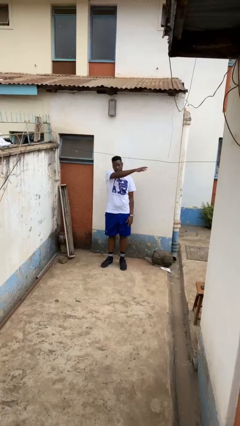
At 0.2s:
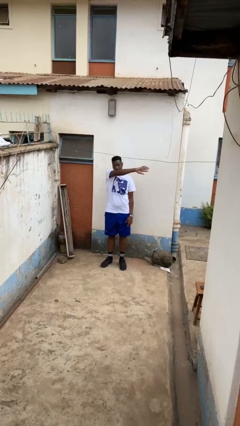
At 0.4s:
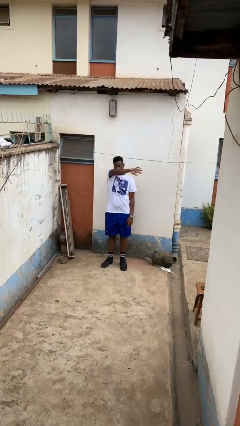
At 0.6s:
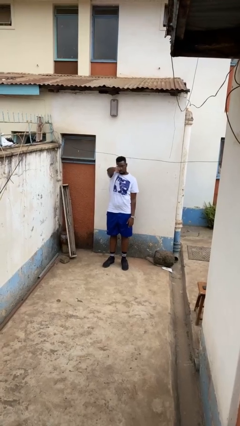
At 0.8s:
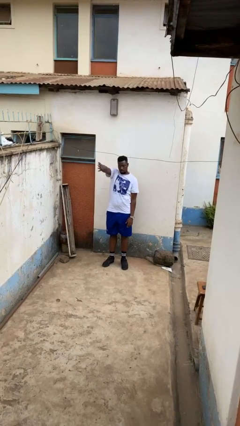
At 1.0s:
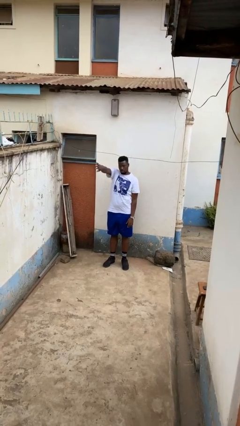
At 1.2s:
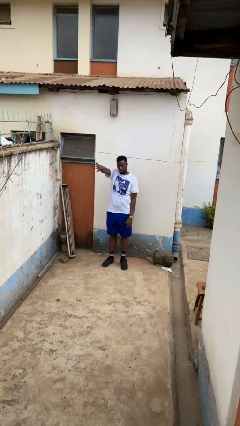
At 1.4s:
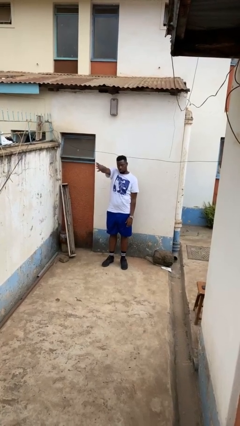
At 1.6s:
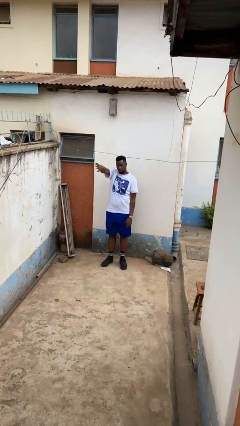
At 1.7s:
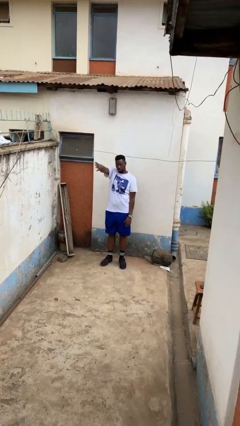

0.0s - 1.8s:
person gestures swipe right

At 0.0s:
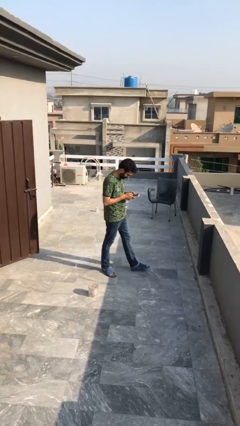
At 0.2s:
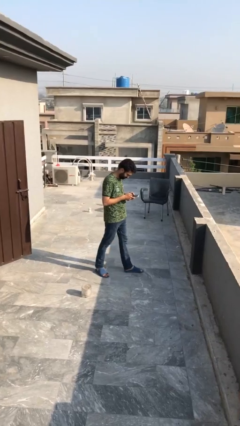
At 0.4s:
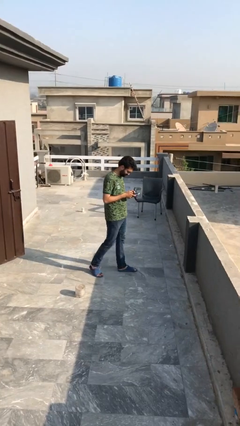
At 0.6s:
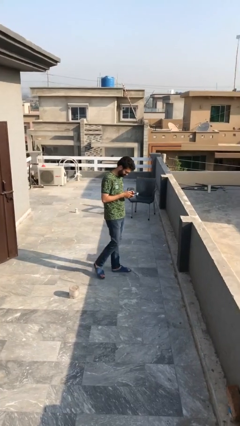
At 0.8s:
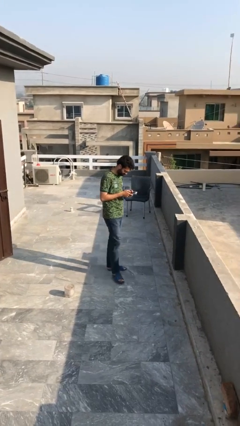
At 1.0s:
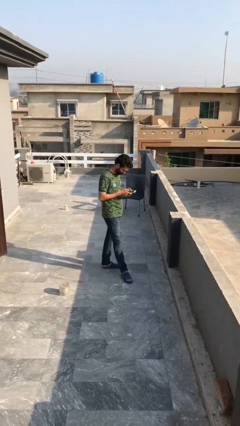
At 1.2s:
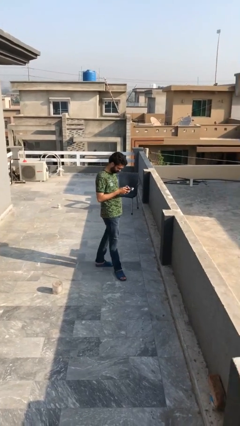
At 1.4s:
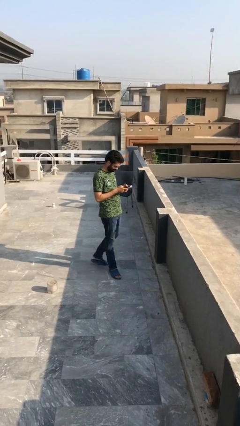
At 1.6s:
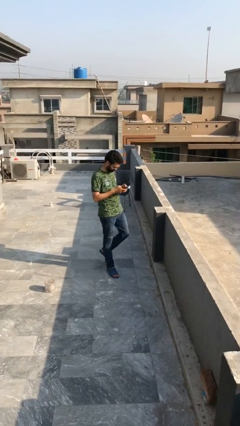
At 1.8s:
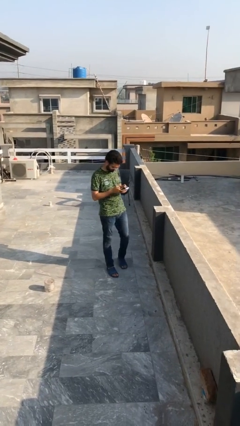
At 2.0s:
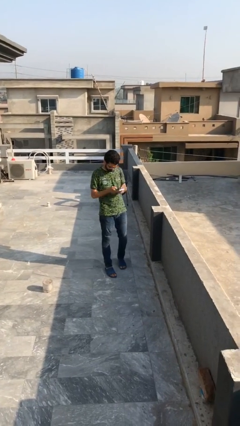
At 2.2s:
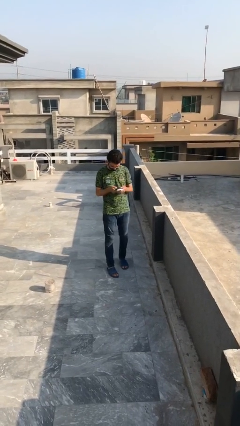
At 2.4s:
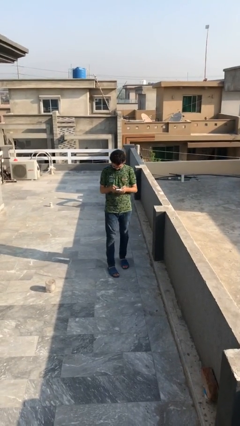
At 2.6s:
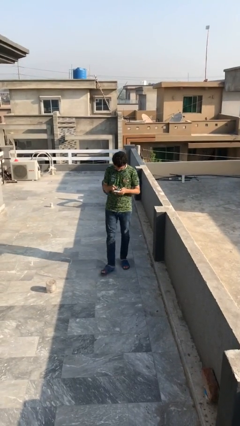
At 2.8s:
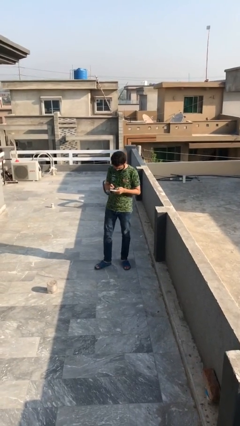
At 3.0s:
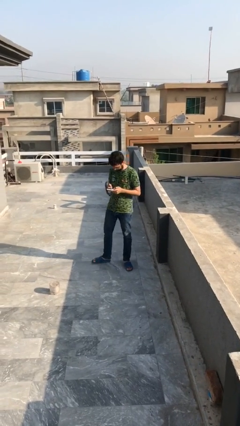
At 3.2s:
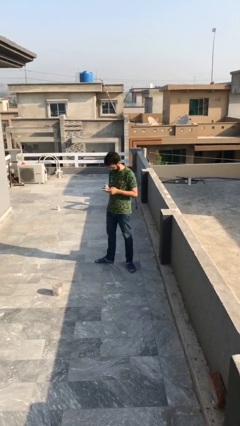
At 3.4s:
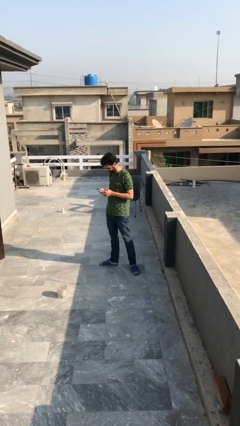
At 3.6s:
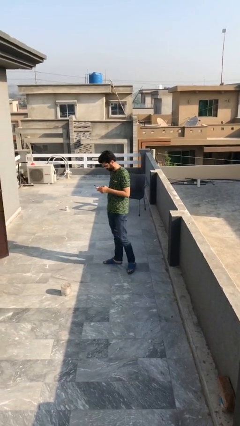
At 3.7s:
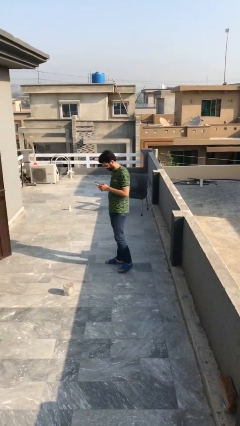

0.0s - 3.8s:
person texts on phone

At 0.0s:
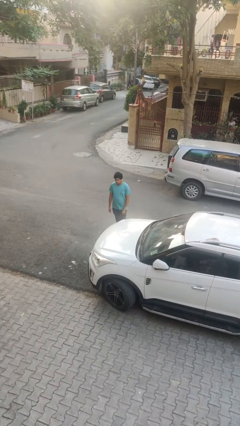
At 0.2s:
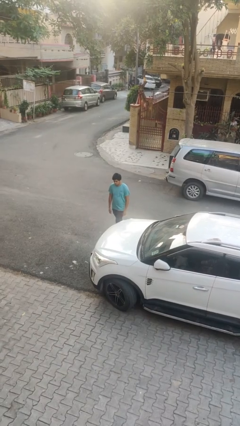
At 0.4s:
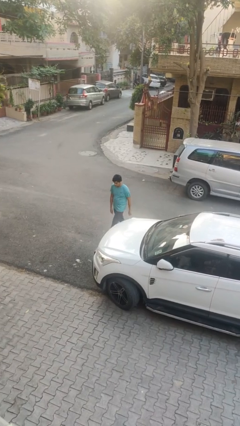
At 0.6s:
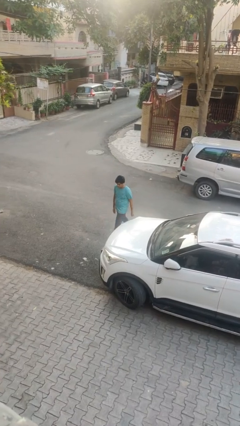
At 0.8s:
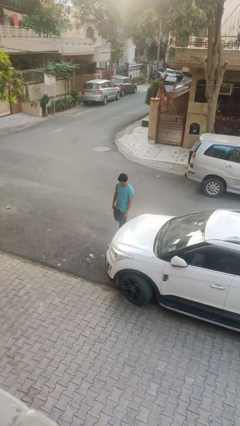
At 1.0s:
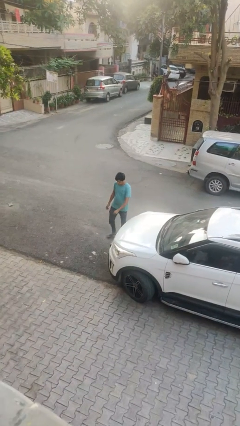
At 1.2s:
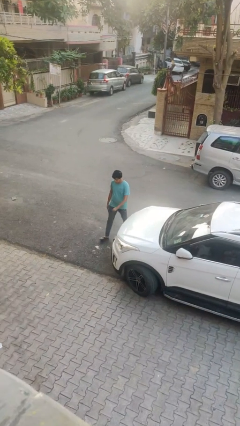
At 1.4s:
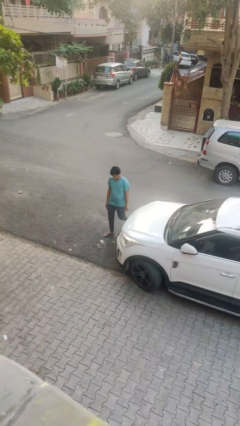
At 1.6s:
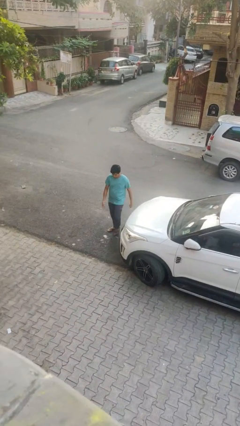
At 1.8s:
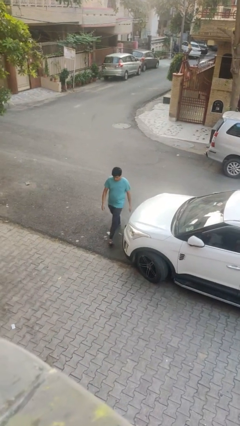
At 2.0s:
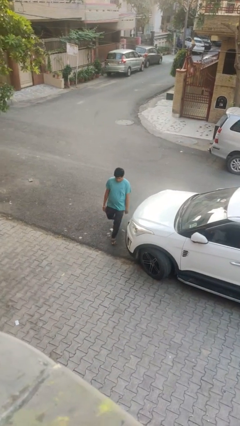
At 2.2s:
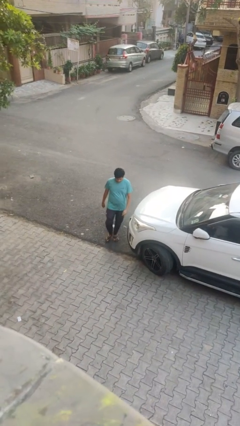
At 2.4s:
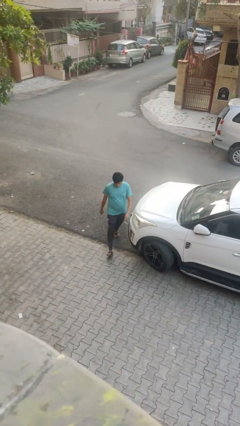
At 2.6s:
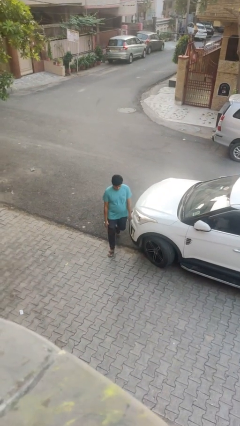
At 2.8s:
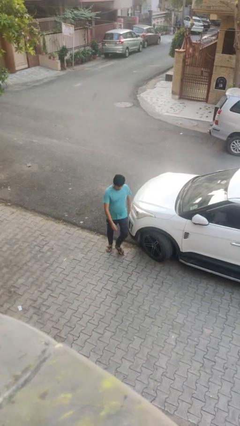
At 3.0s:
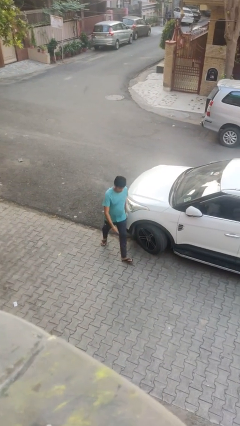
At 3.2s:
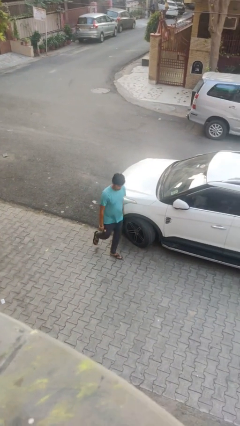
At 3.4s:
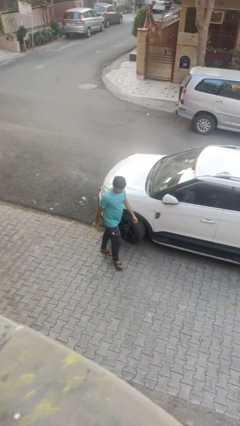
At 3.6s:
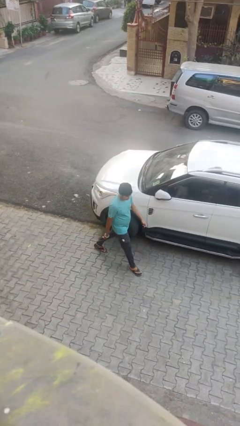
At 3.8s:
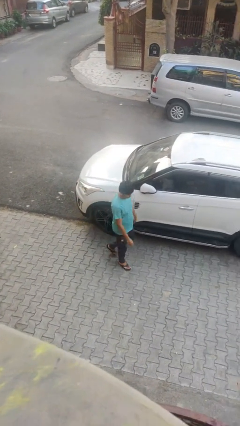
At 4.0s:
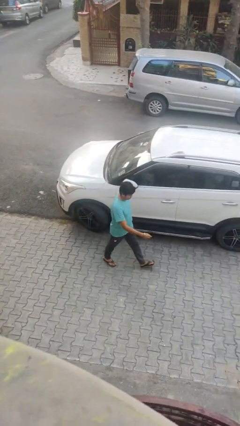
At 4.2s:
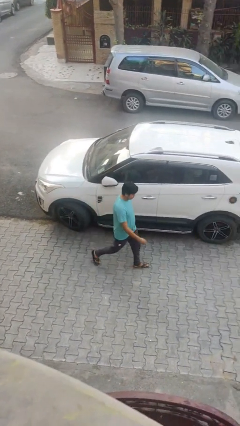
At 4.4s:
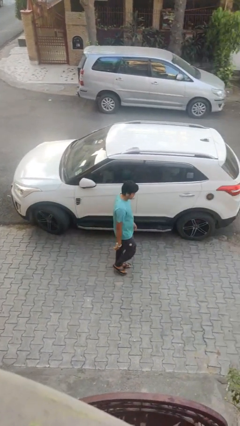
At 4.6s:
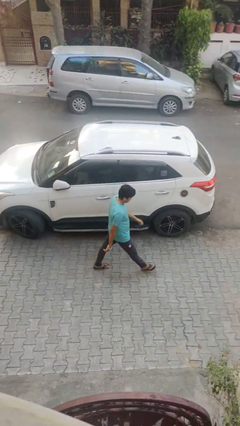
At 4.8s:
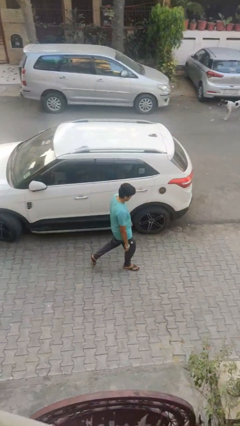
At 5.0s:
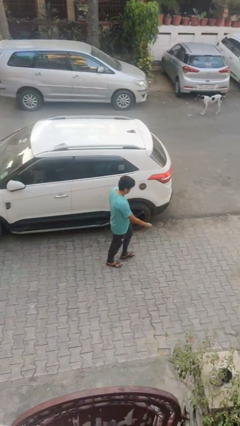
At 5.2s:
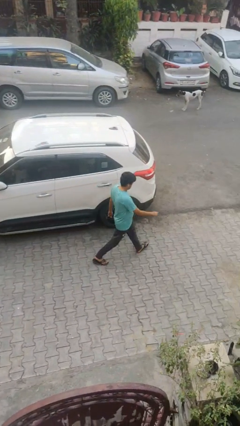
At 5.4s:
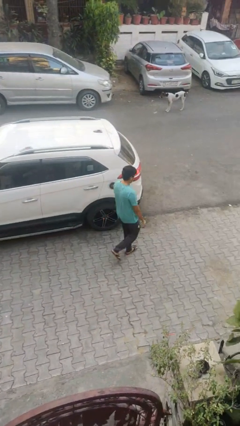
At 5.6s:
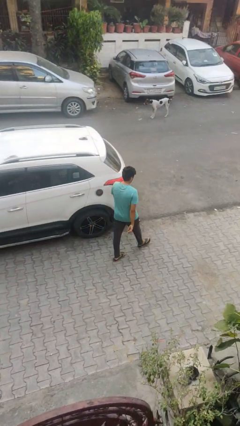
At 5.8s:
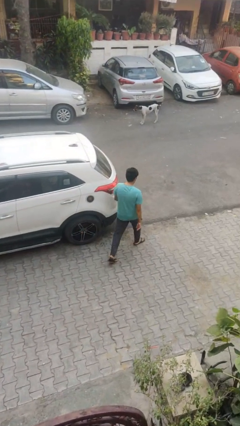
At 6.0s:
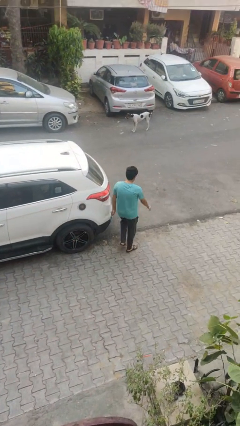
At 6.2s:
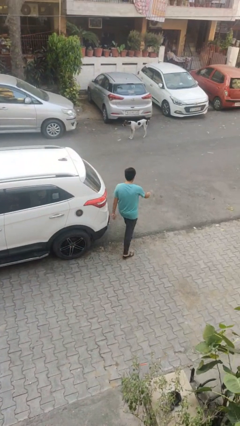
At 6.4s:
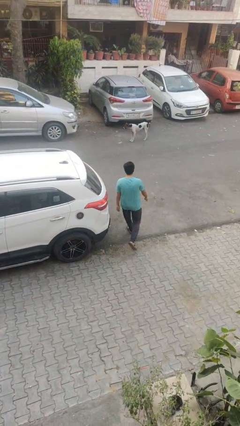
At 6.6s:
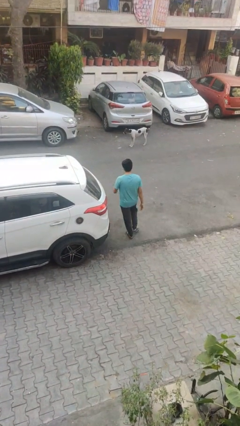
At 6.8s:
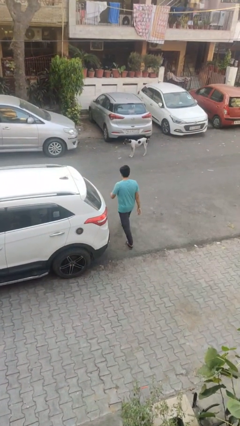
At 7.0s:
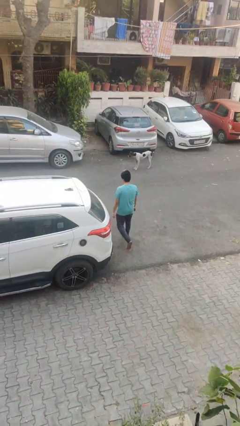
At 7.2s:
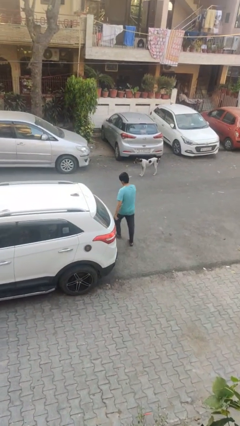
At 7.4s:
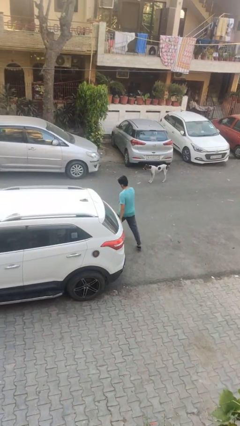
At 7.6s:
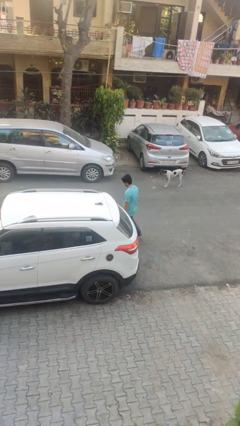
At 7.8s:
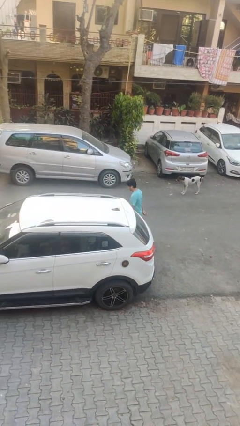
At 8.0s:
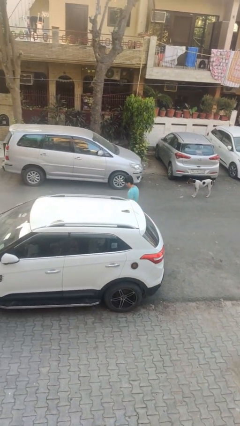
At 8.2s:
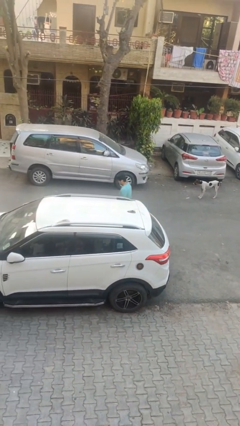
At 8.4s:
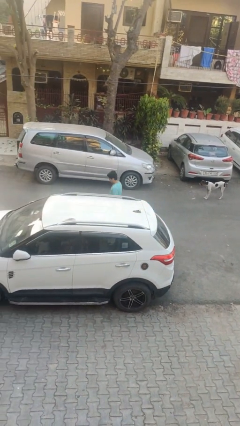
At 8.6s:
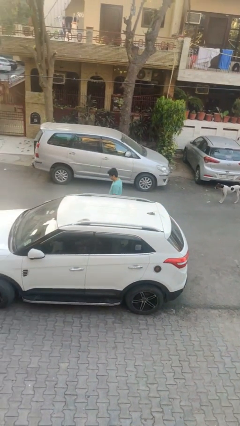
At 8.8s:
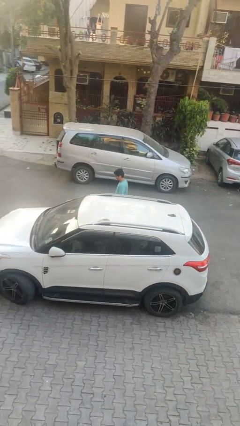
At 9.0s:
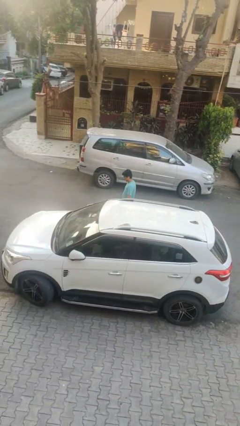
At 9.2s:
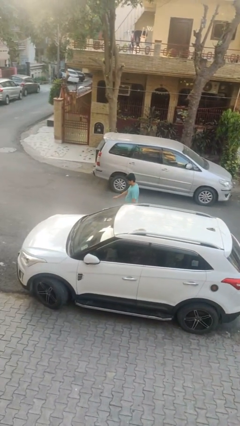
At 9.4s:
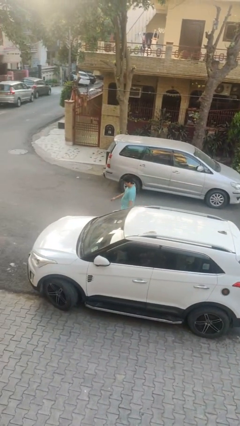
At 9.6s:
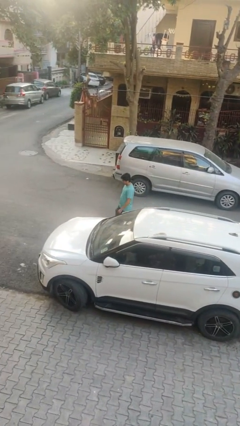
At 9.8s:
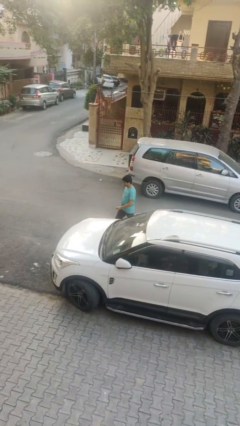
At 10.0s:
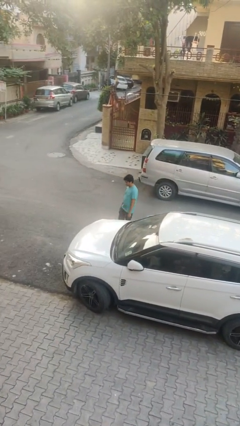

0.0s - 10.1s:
person walks around car

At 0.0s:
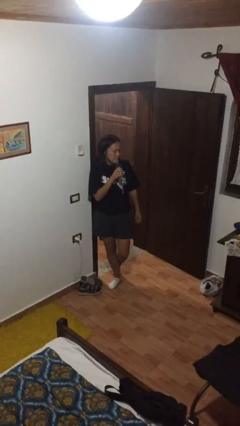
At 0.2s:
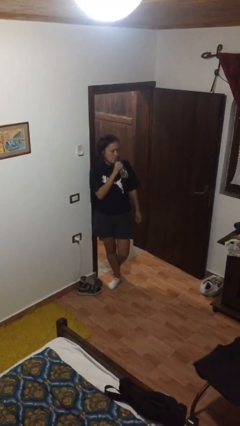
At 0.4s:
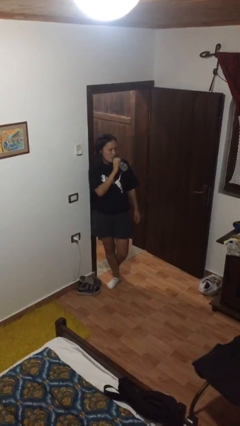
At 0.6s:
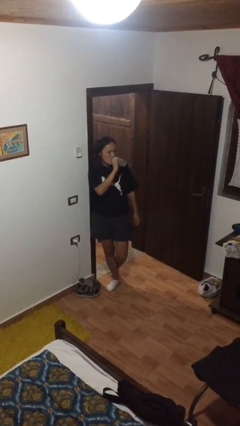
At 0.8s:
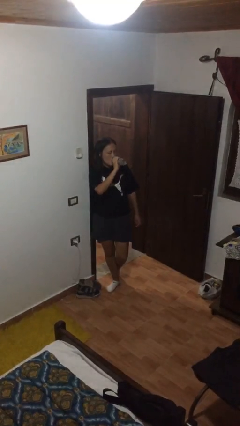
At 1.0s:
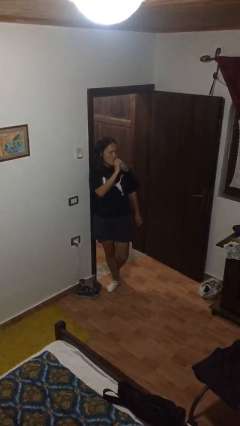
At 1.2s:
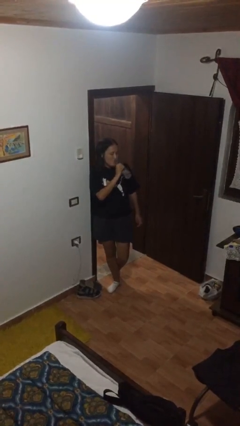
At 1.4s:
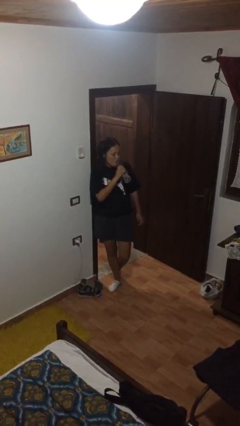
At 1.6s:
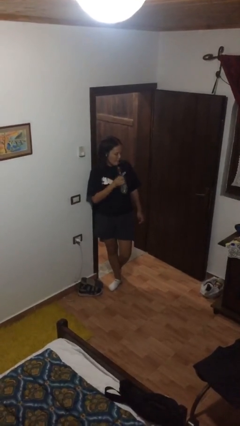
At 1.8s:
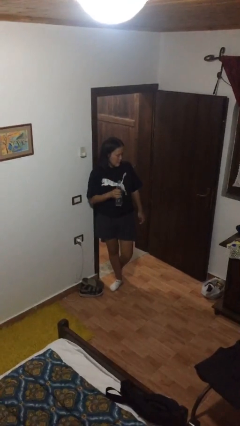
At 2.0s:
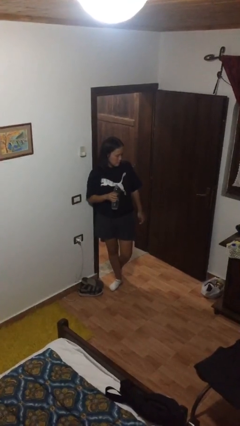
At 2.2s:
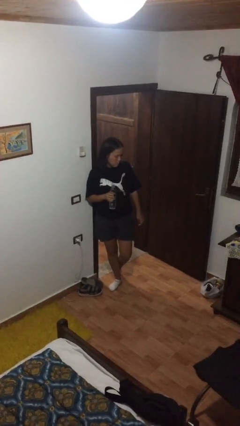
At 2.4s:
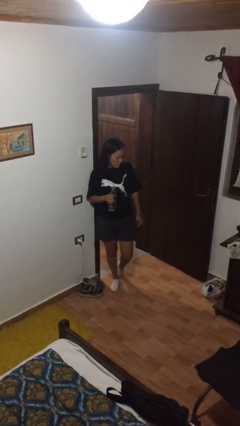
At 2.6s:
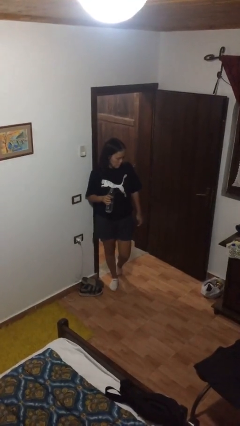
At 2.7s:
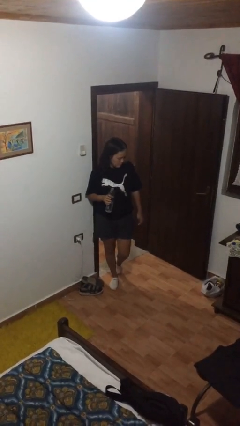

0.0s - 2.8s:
person drinks from bottle
